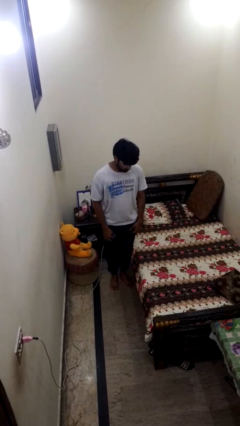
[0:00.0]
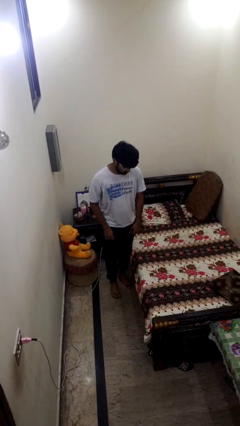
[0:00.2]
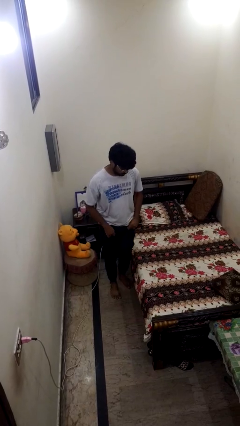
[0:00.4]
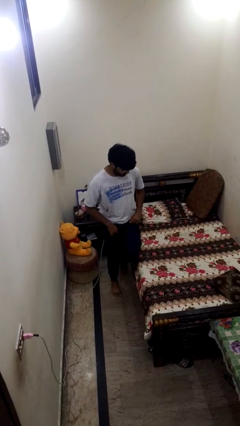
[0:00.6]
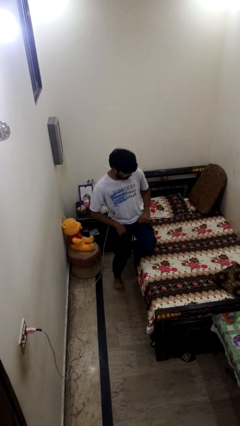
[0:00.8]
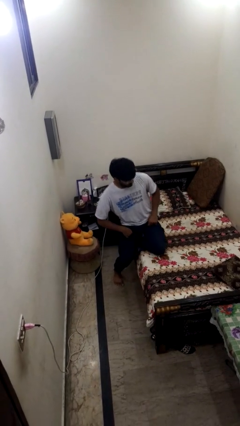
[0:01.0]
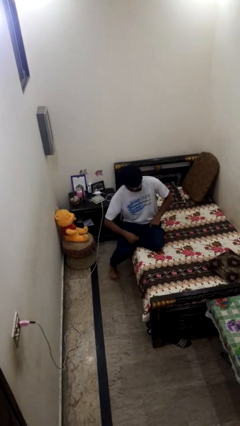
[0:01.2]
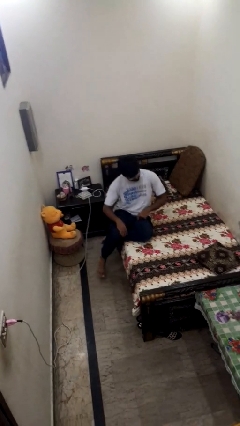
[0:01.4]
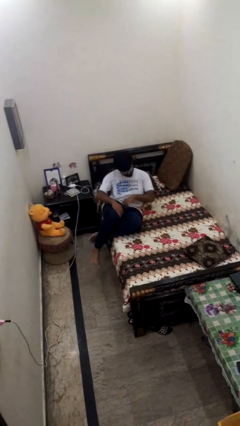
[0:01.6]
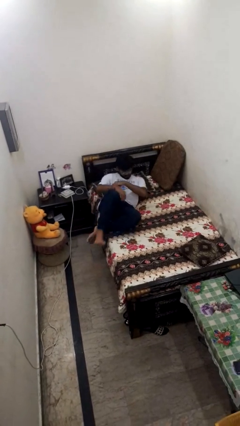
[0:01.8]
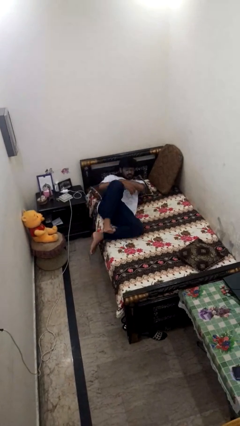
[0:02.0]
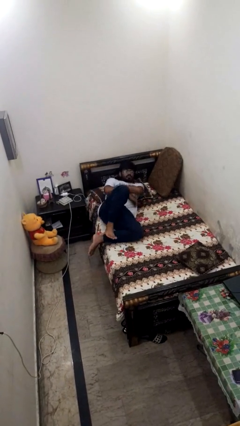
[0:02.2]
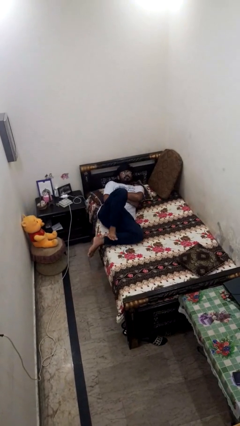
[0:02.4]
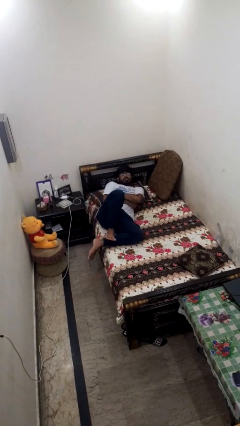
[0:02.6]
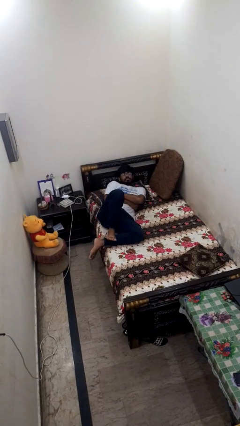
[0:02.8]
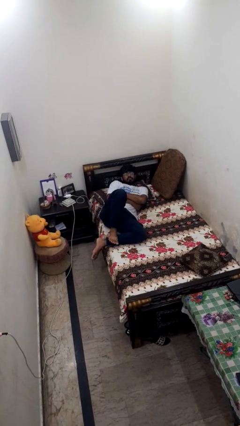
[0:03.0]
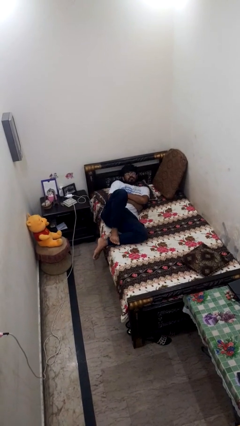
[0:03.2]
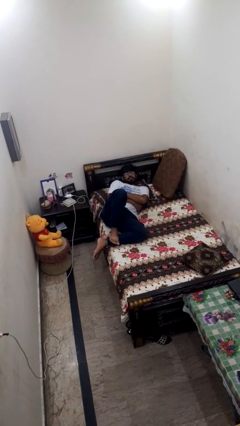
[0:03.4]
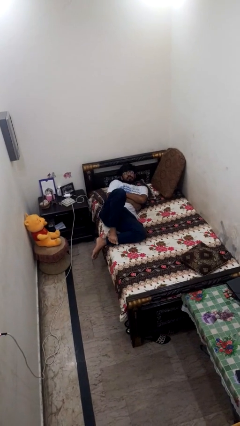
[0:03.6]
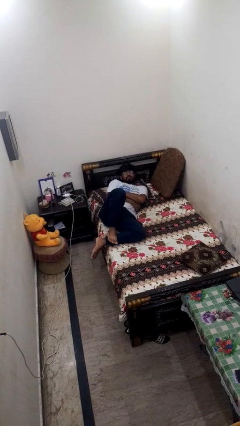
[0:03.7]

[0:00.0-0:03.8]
person lies down on bed

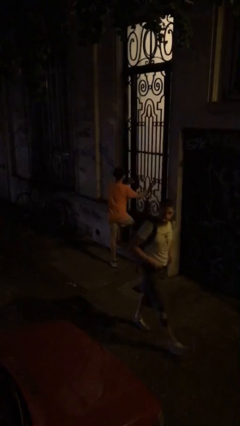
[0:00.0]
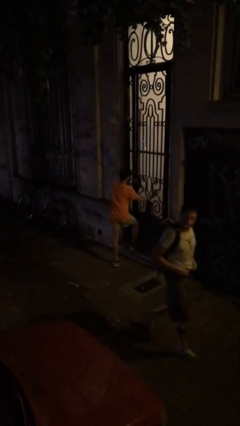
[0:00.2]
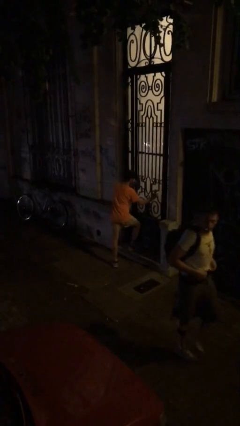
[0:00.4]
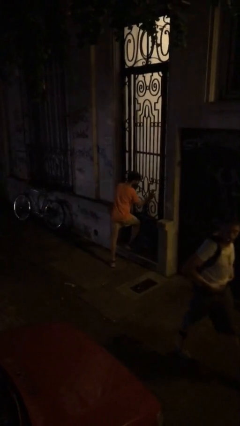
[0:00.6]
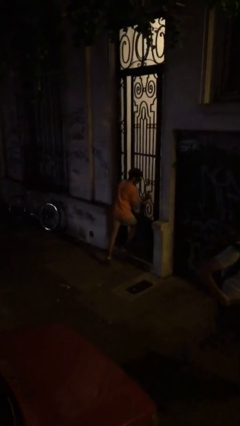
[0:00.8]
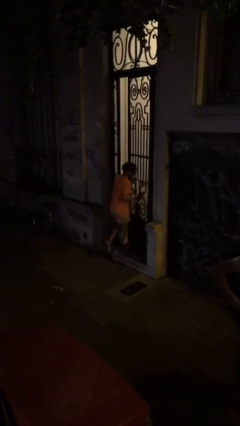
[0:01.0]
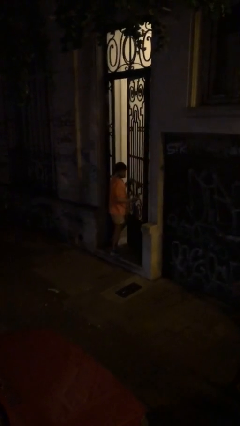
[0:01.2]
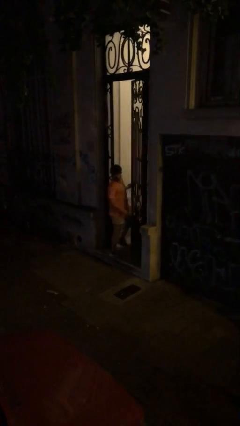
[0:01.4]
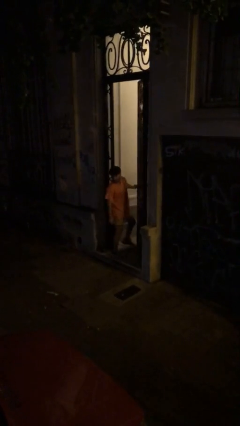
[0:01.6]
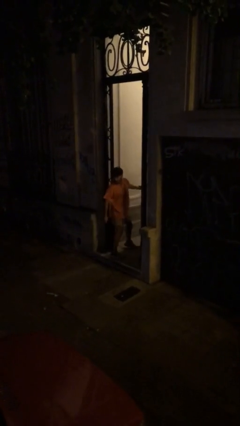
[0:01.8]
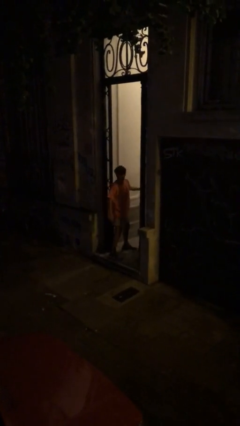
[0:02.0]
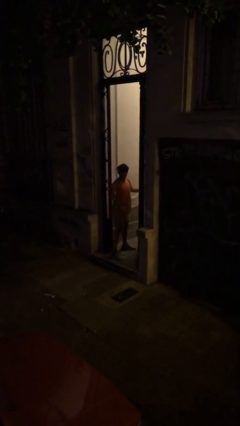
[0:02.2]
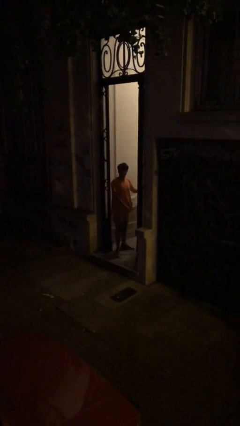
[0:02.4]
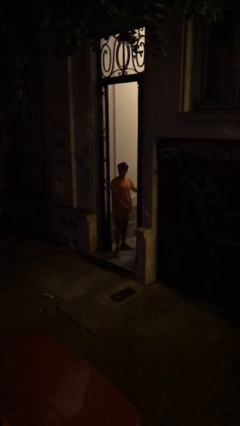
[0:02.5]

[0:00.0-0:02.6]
person opens facility door

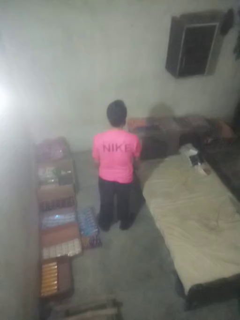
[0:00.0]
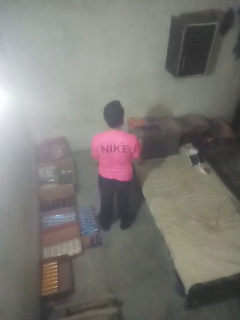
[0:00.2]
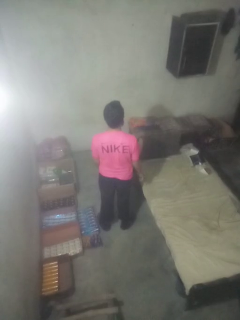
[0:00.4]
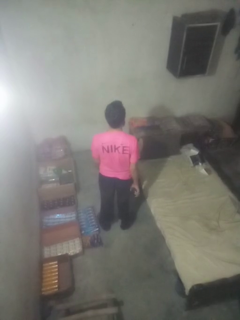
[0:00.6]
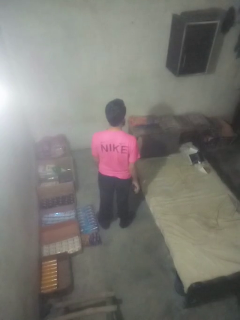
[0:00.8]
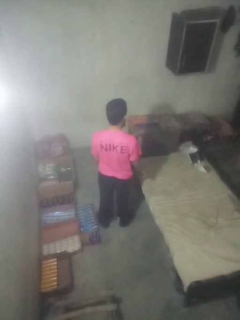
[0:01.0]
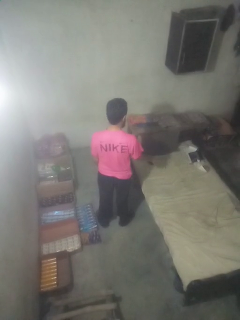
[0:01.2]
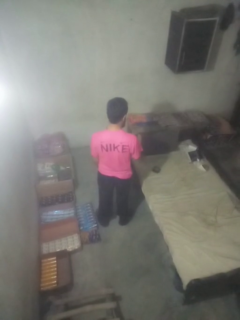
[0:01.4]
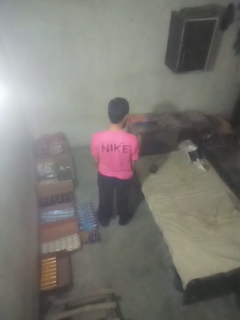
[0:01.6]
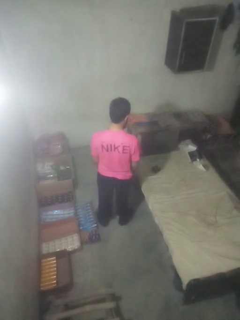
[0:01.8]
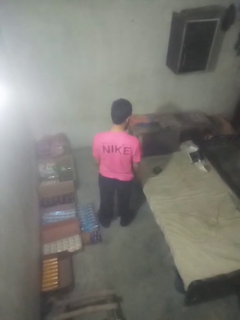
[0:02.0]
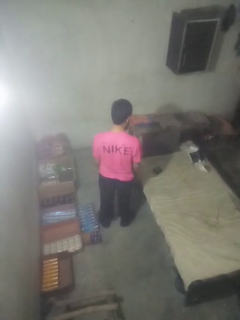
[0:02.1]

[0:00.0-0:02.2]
person throws object on bed

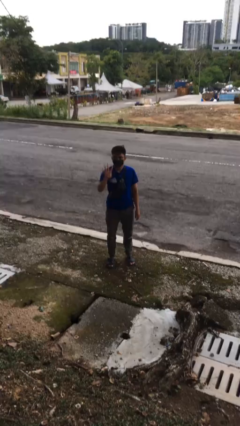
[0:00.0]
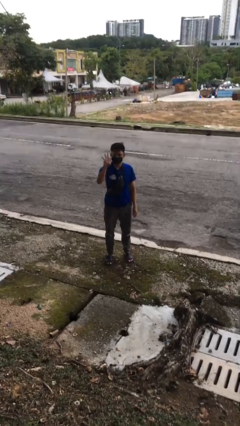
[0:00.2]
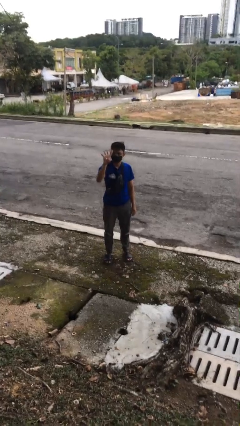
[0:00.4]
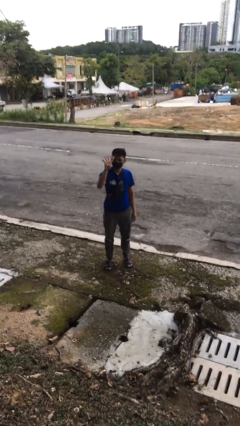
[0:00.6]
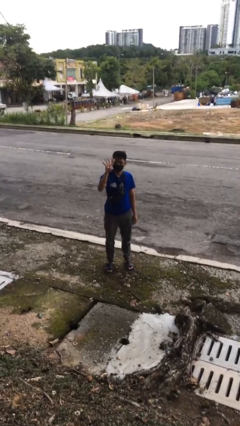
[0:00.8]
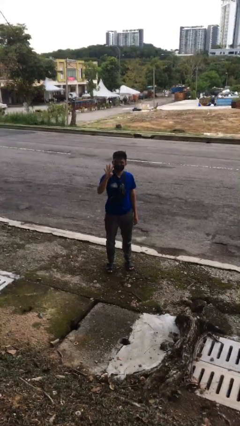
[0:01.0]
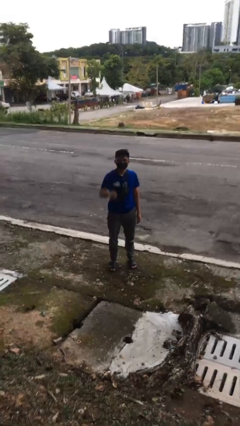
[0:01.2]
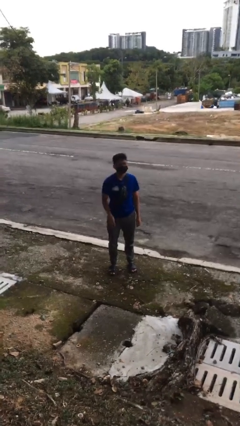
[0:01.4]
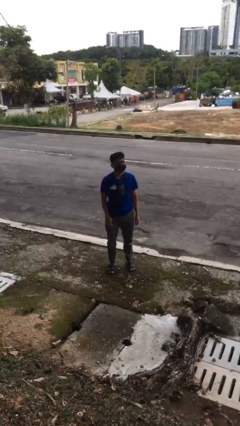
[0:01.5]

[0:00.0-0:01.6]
person gestures number four

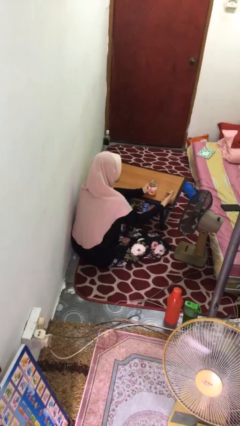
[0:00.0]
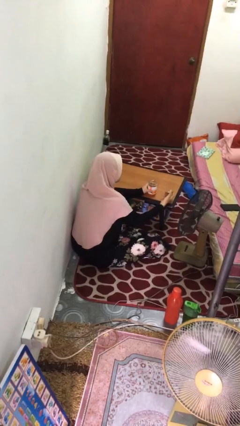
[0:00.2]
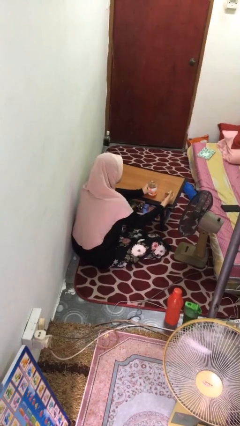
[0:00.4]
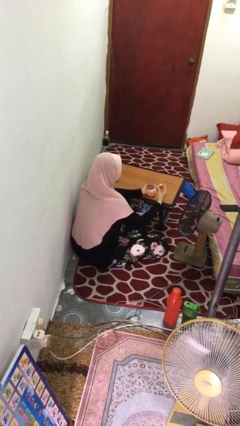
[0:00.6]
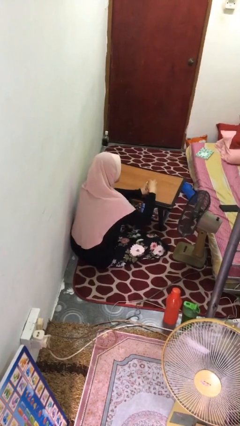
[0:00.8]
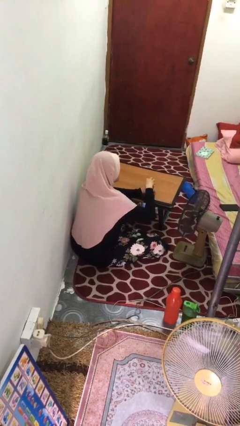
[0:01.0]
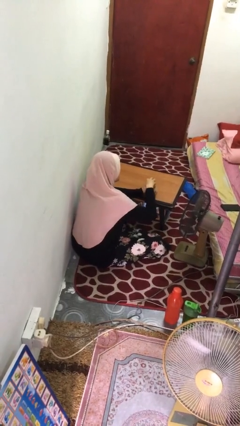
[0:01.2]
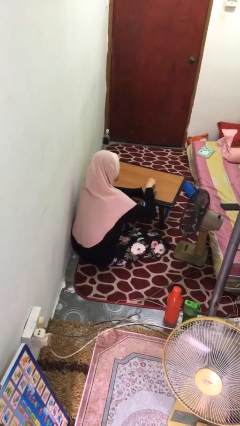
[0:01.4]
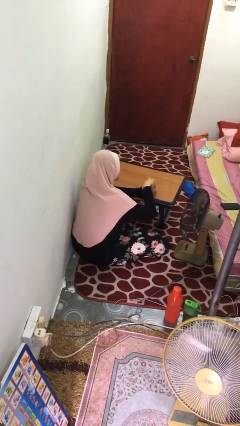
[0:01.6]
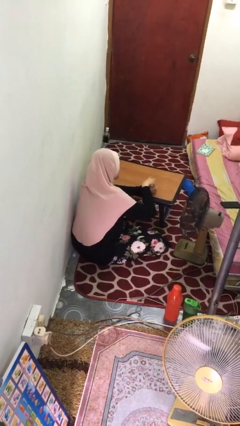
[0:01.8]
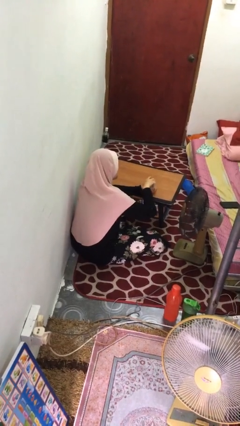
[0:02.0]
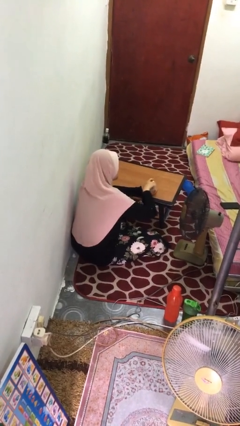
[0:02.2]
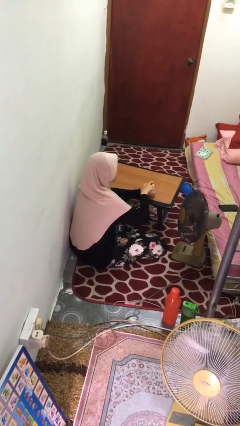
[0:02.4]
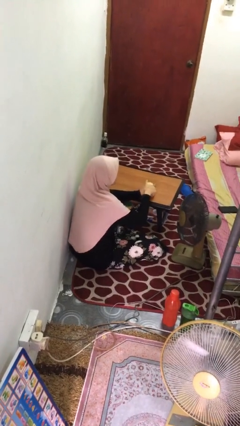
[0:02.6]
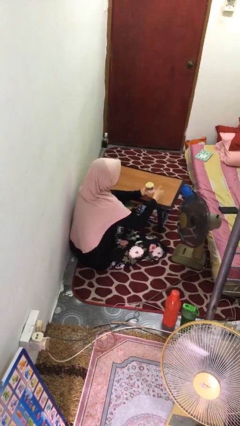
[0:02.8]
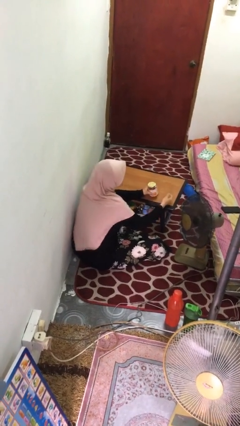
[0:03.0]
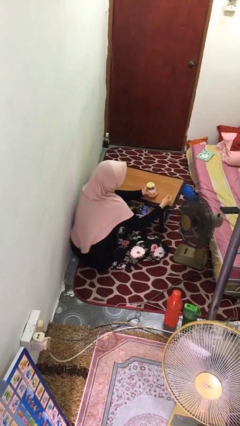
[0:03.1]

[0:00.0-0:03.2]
person closes jar

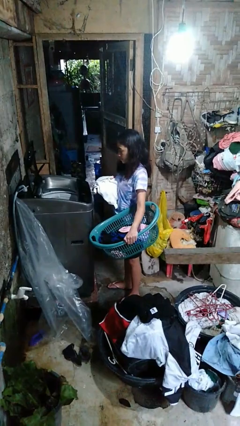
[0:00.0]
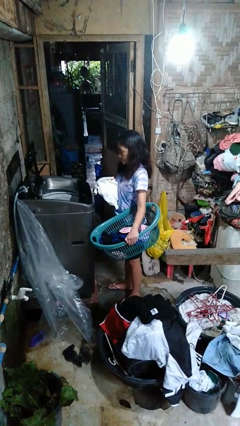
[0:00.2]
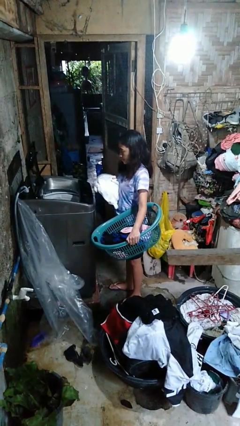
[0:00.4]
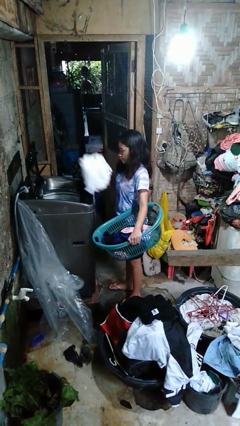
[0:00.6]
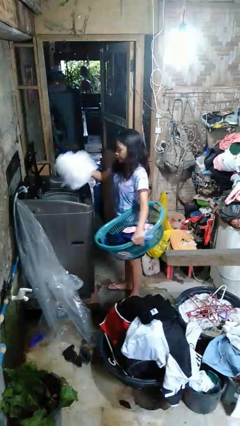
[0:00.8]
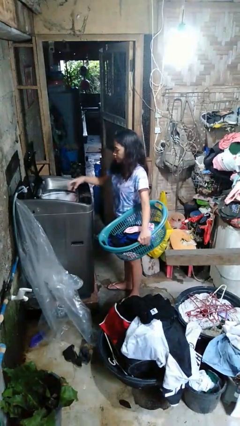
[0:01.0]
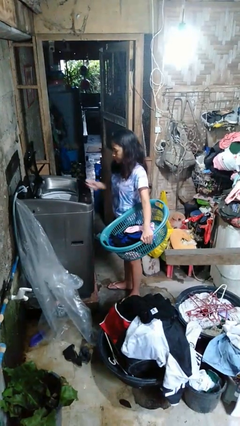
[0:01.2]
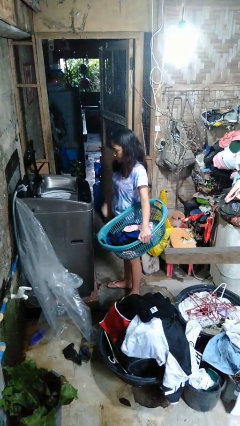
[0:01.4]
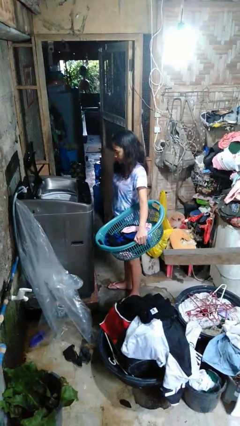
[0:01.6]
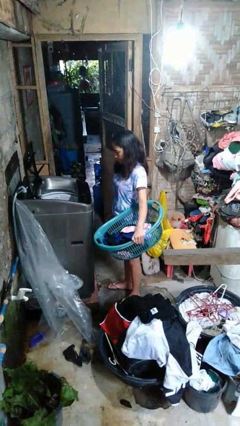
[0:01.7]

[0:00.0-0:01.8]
person loads clotheswasher

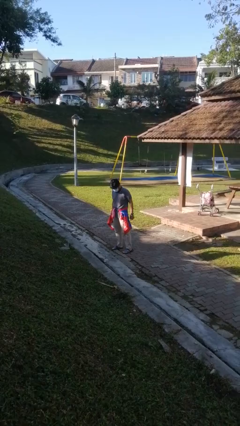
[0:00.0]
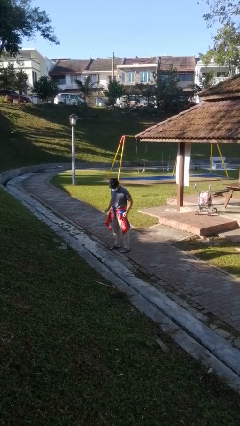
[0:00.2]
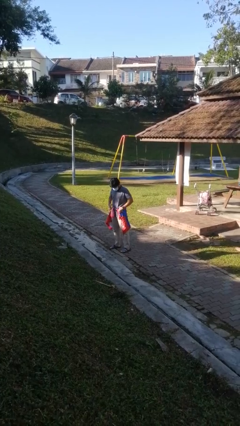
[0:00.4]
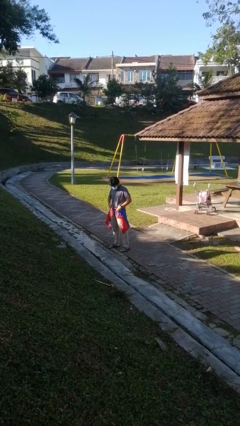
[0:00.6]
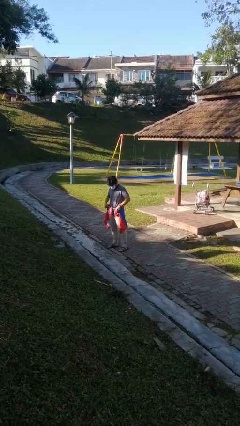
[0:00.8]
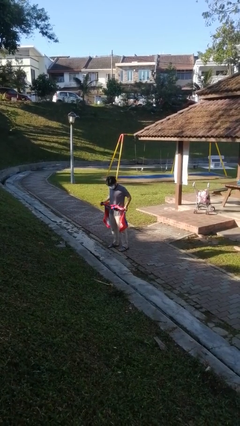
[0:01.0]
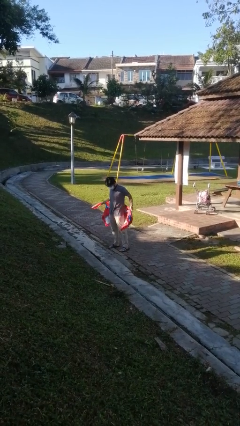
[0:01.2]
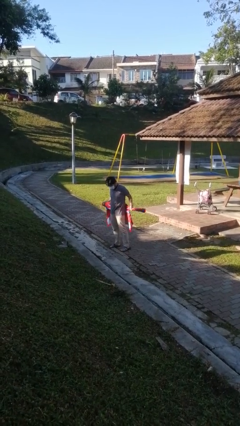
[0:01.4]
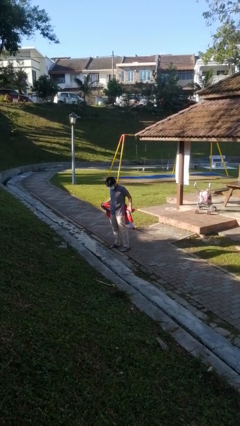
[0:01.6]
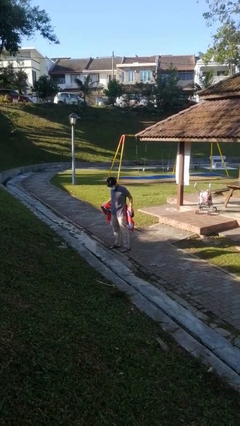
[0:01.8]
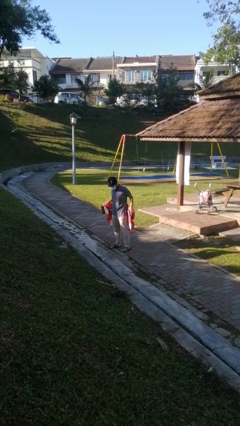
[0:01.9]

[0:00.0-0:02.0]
person unties jacket around waist

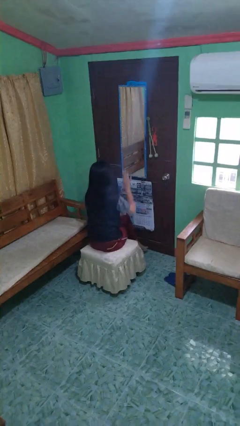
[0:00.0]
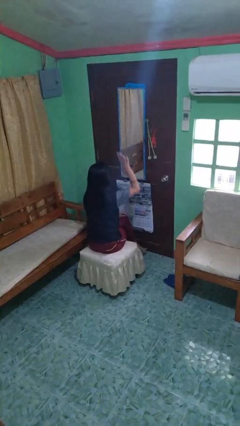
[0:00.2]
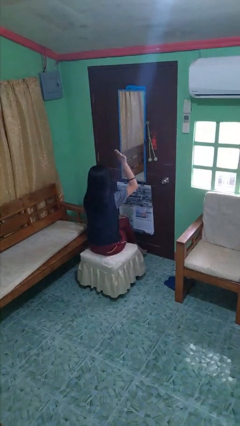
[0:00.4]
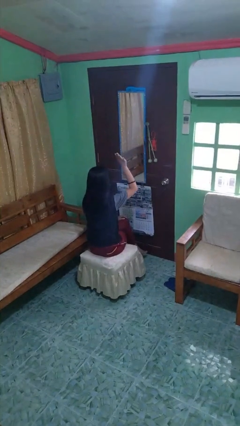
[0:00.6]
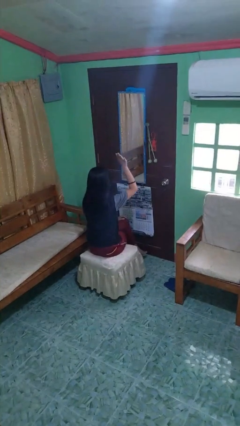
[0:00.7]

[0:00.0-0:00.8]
person gestures raise hand
